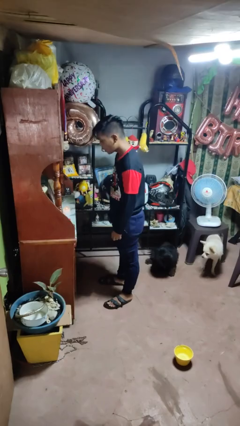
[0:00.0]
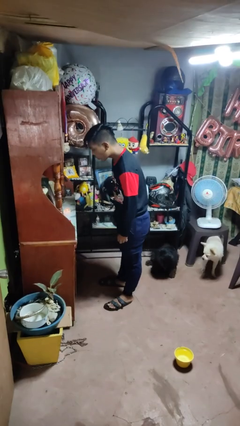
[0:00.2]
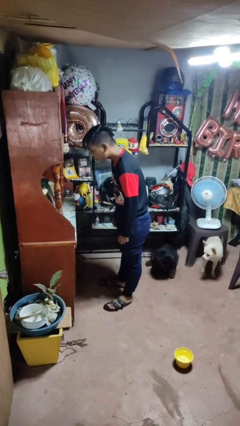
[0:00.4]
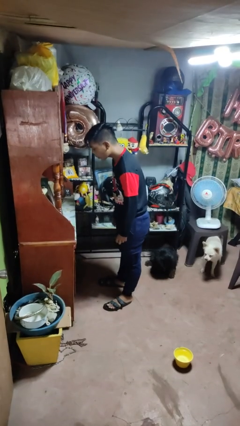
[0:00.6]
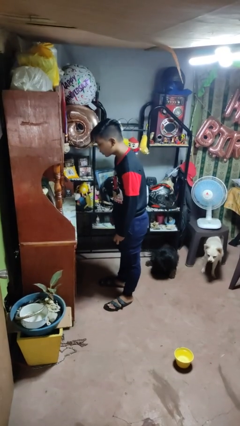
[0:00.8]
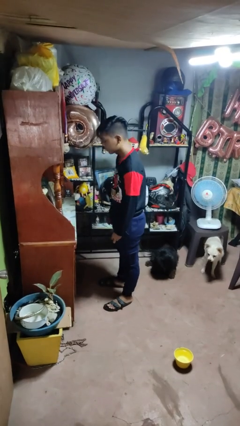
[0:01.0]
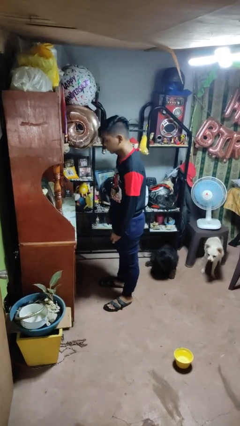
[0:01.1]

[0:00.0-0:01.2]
person extinguishes candle

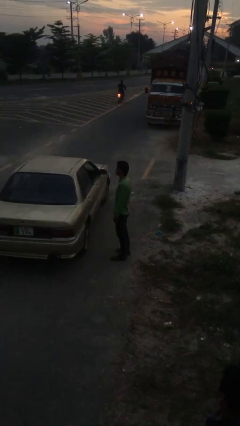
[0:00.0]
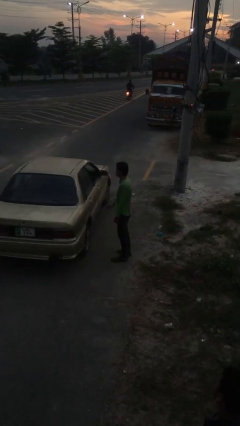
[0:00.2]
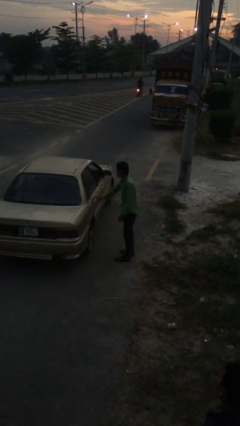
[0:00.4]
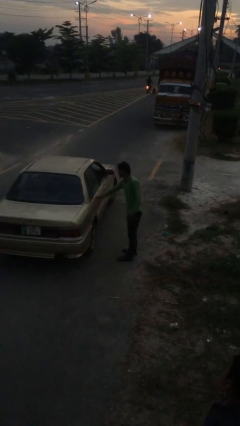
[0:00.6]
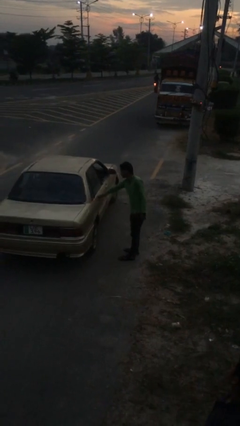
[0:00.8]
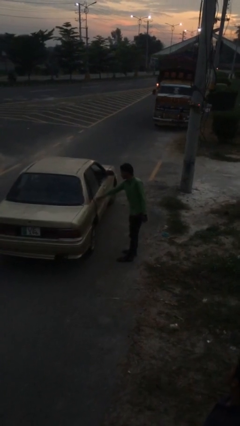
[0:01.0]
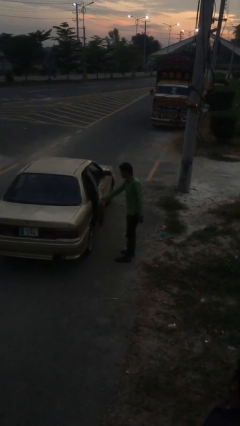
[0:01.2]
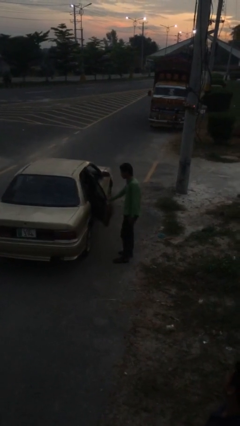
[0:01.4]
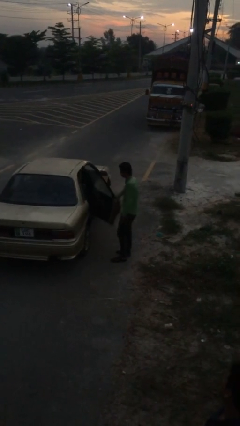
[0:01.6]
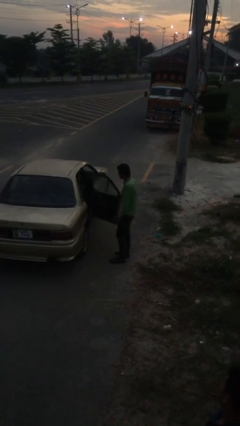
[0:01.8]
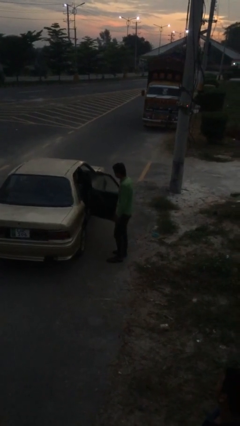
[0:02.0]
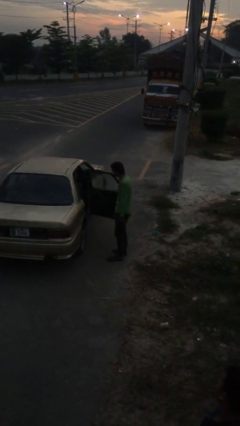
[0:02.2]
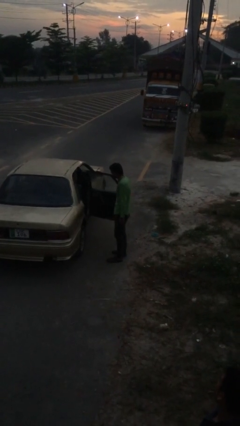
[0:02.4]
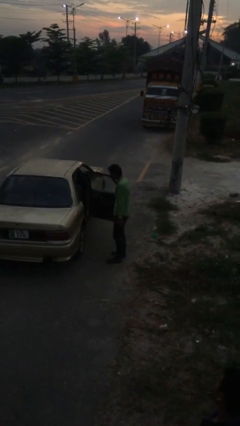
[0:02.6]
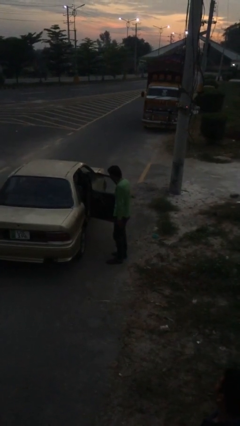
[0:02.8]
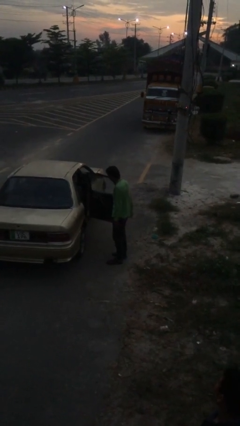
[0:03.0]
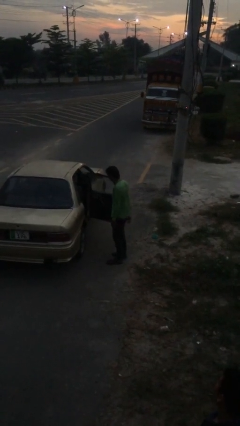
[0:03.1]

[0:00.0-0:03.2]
person opens car door

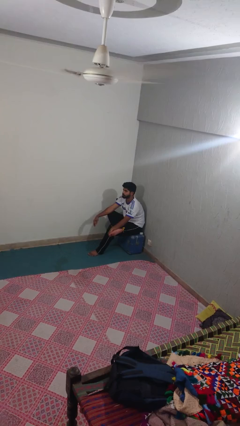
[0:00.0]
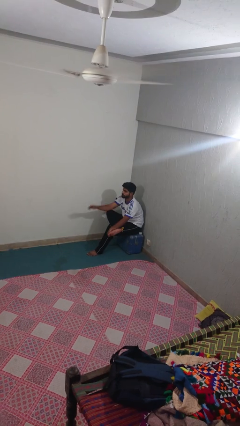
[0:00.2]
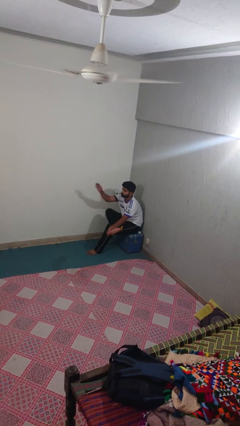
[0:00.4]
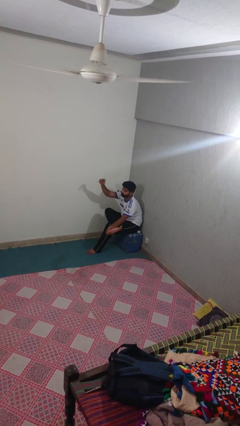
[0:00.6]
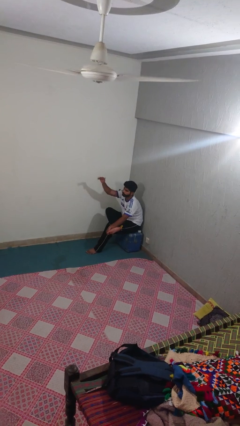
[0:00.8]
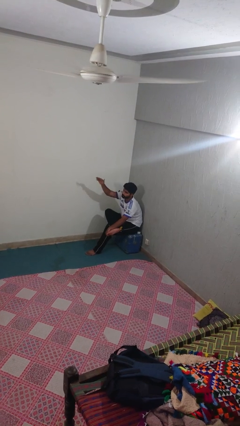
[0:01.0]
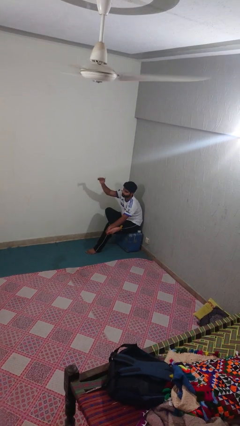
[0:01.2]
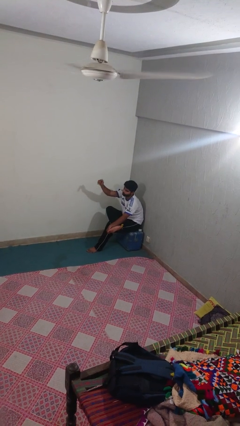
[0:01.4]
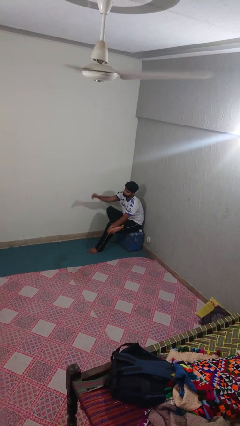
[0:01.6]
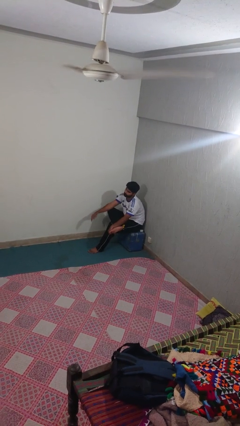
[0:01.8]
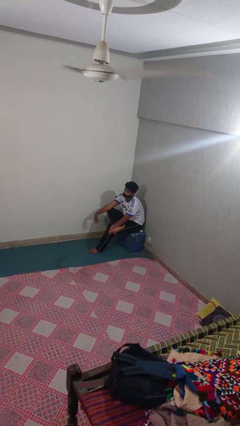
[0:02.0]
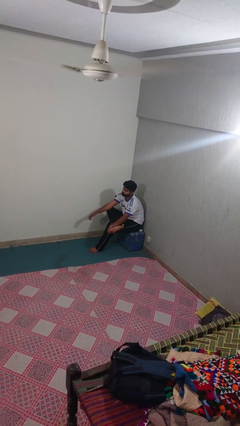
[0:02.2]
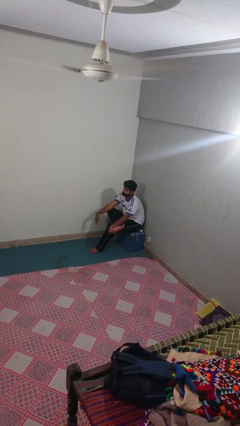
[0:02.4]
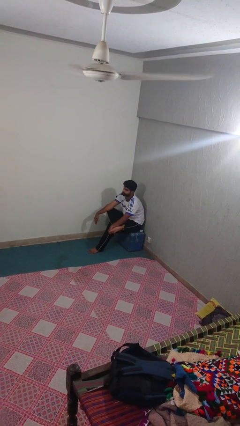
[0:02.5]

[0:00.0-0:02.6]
person gestures come here

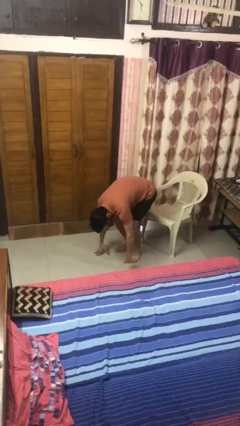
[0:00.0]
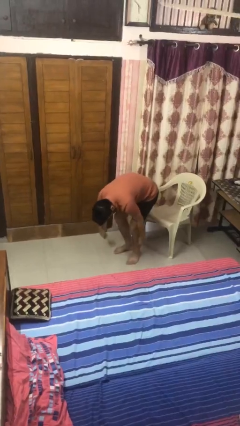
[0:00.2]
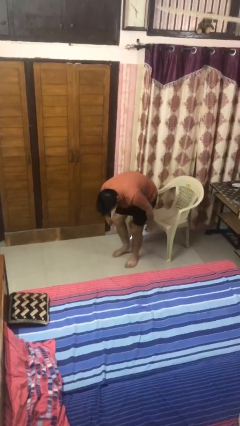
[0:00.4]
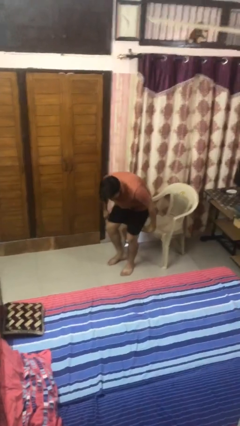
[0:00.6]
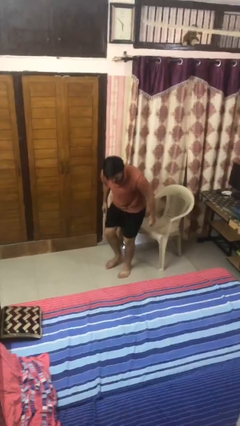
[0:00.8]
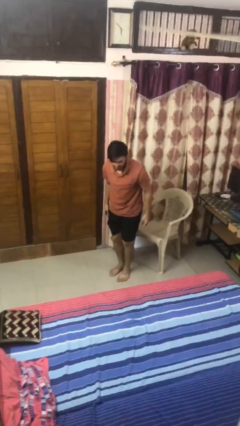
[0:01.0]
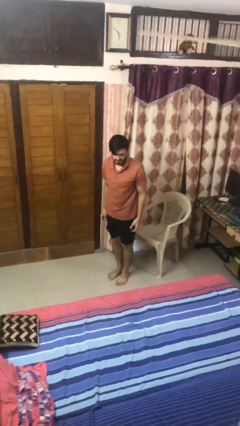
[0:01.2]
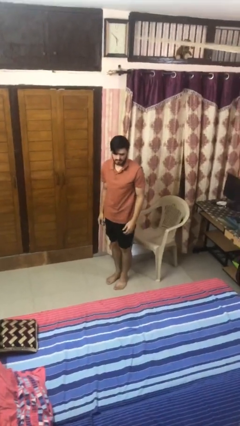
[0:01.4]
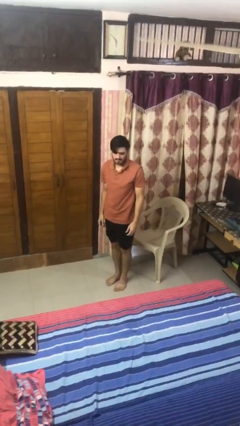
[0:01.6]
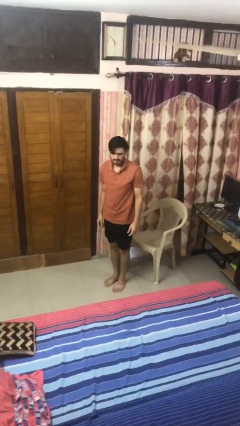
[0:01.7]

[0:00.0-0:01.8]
person stands up from floor

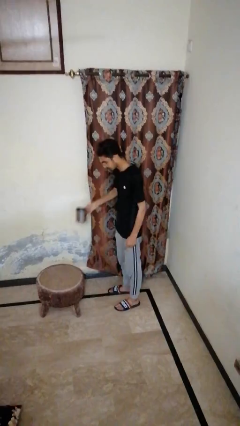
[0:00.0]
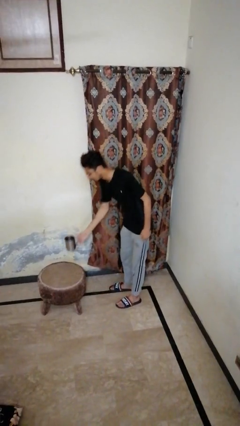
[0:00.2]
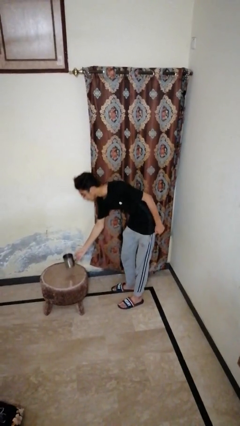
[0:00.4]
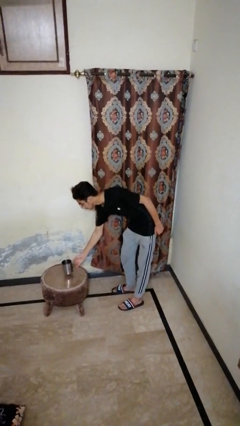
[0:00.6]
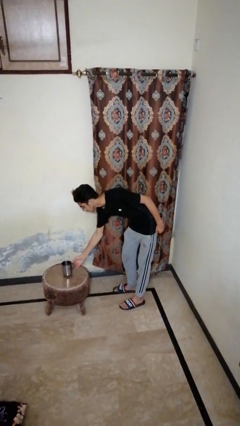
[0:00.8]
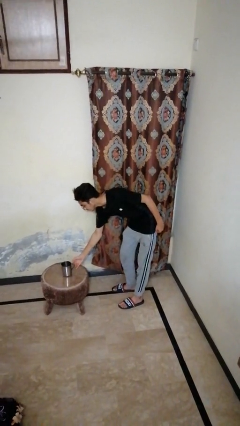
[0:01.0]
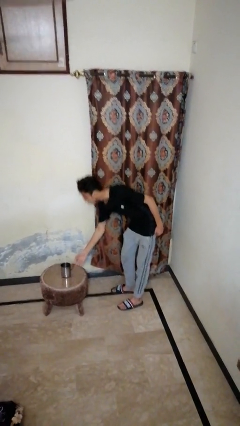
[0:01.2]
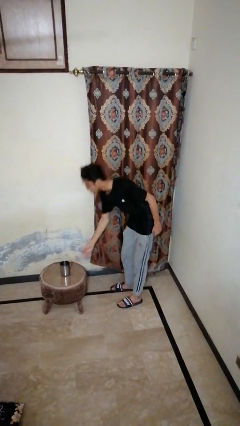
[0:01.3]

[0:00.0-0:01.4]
person puts down object on table

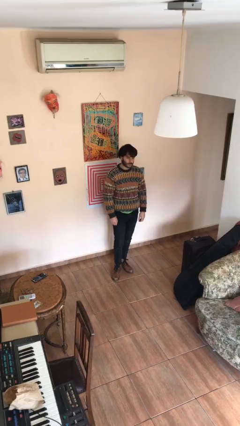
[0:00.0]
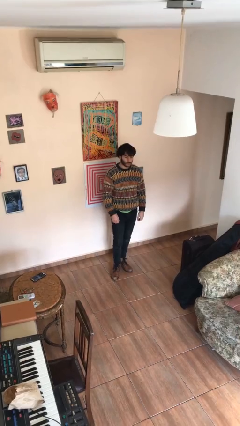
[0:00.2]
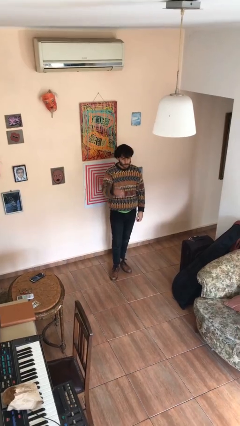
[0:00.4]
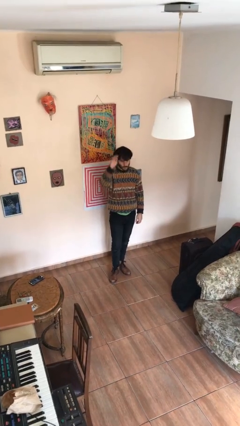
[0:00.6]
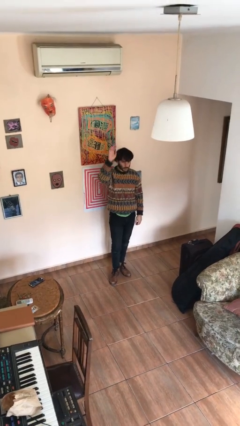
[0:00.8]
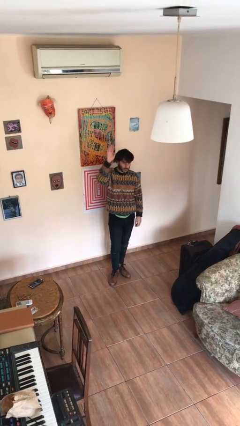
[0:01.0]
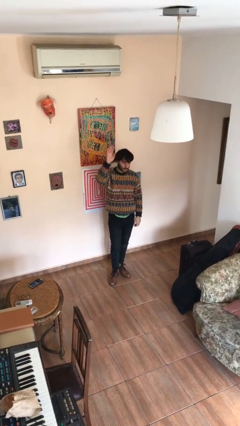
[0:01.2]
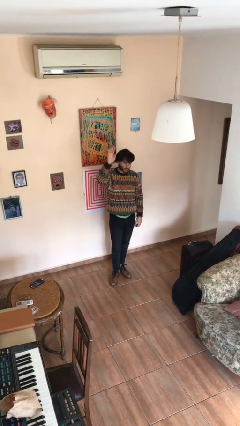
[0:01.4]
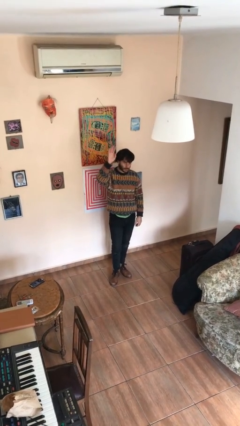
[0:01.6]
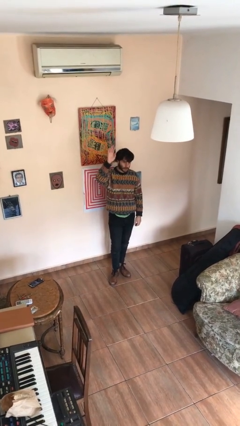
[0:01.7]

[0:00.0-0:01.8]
person gestures raise hand

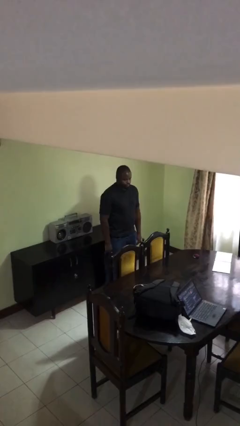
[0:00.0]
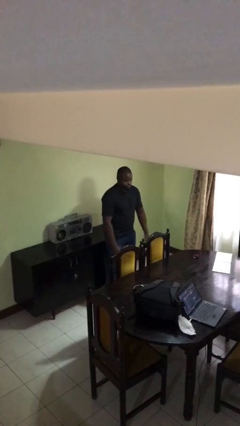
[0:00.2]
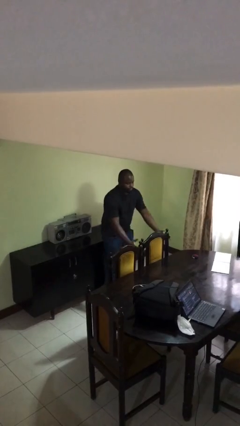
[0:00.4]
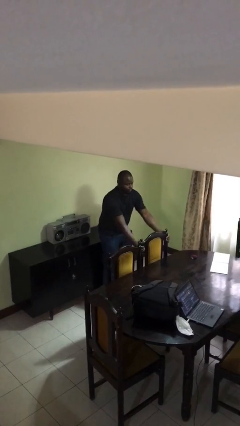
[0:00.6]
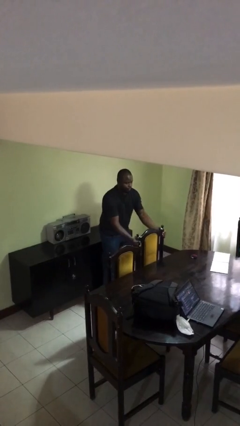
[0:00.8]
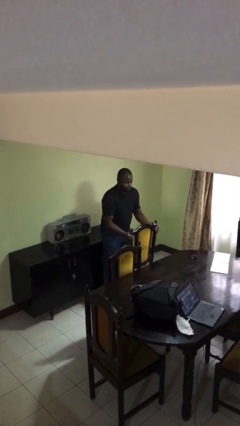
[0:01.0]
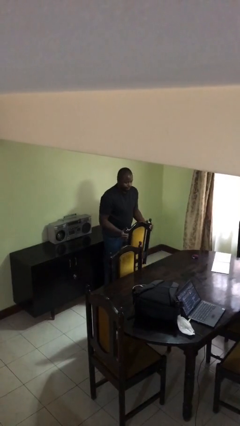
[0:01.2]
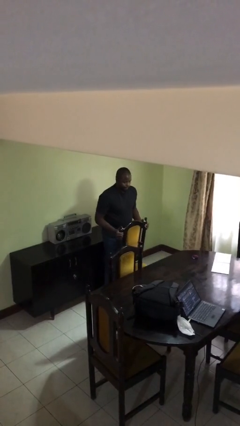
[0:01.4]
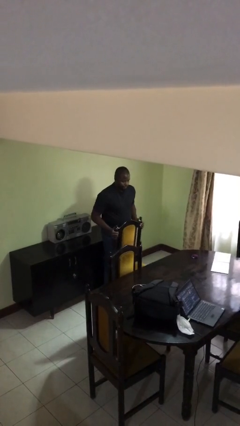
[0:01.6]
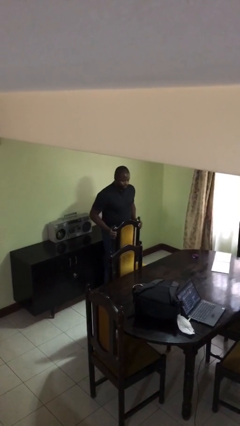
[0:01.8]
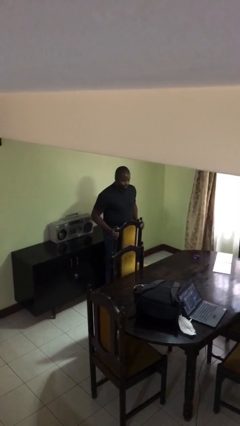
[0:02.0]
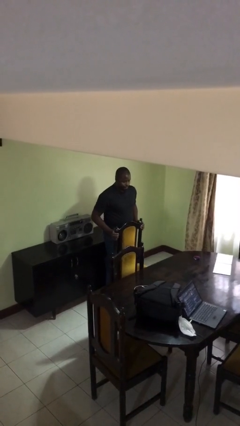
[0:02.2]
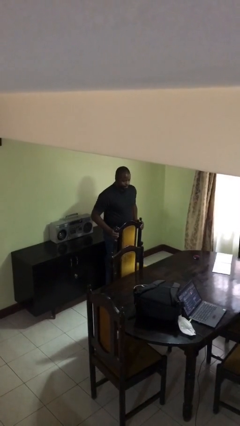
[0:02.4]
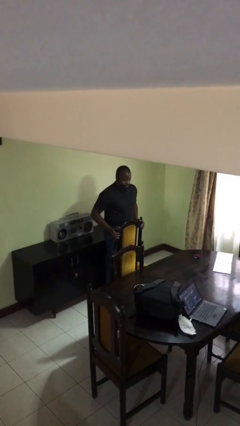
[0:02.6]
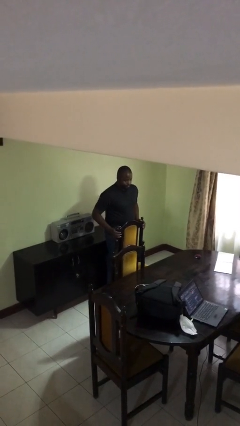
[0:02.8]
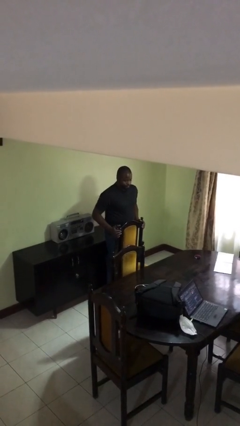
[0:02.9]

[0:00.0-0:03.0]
person pulls out chair

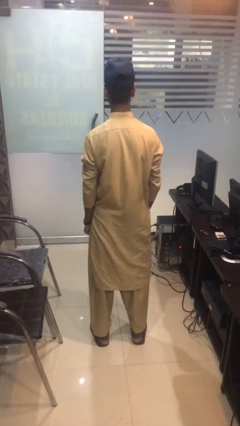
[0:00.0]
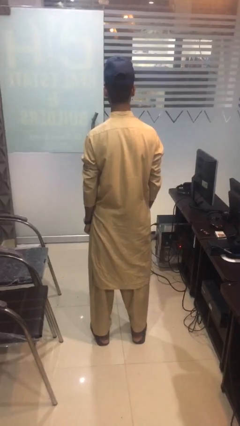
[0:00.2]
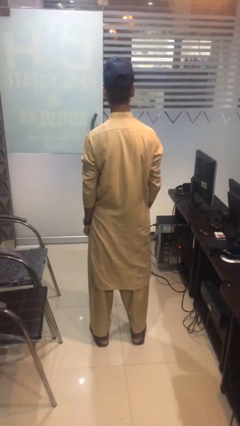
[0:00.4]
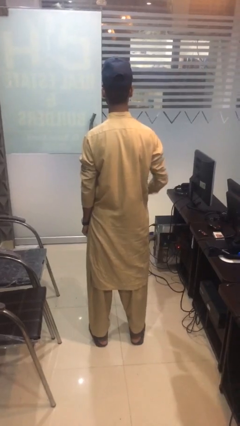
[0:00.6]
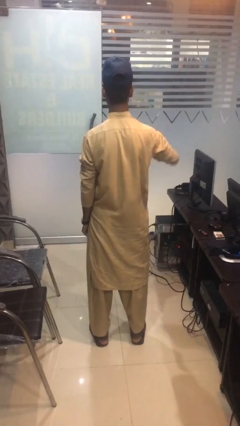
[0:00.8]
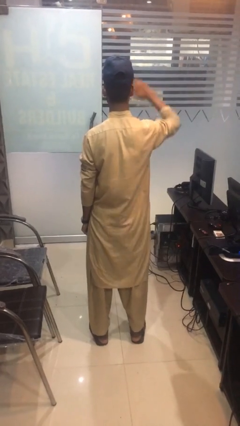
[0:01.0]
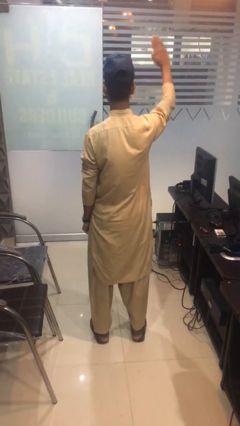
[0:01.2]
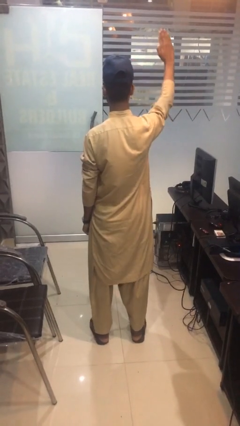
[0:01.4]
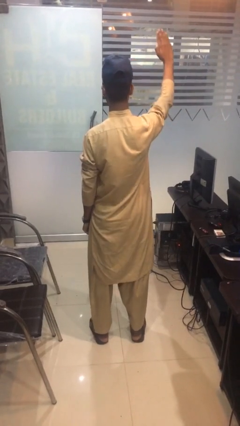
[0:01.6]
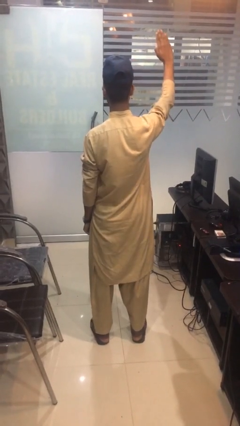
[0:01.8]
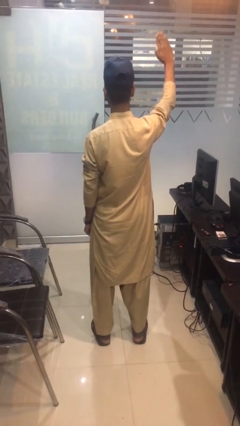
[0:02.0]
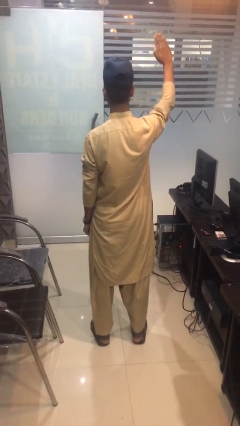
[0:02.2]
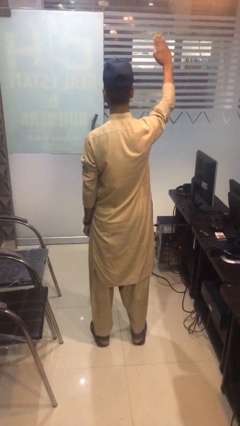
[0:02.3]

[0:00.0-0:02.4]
person gestures swipe up
